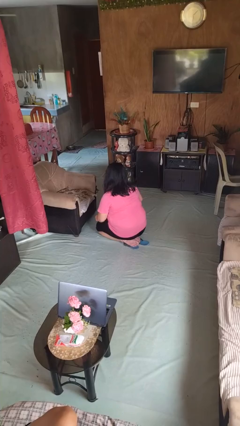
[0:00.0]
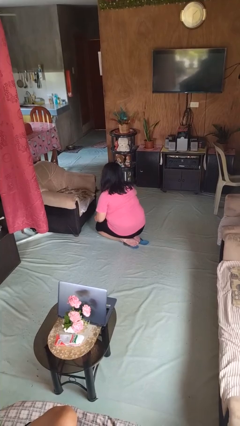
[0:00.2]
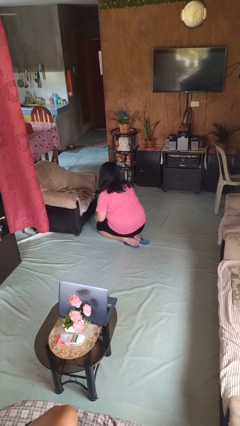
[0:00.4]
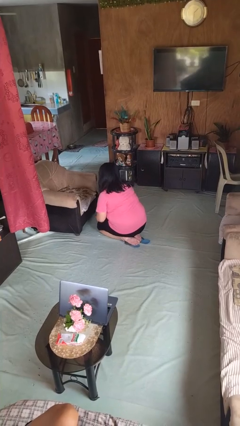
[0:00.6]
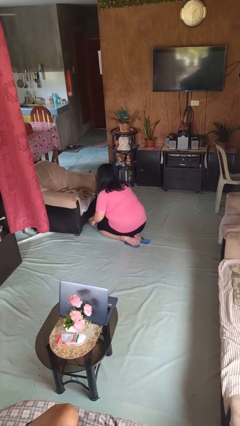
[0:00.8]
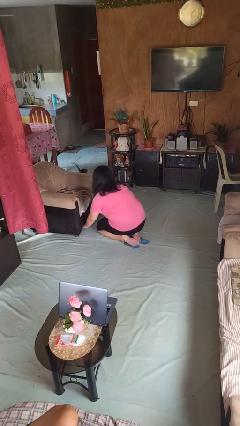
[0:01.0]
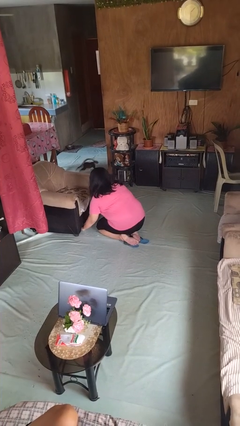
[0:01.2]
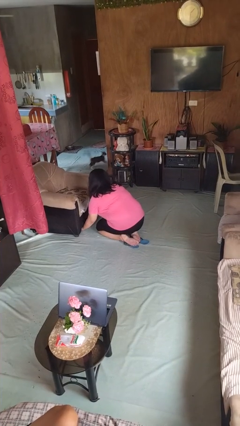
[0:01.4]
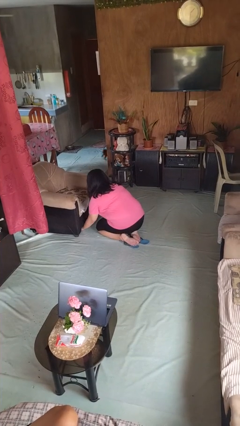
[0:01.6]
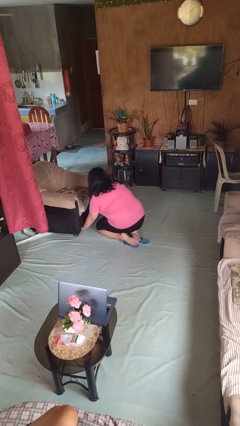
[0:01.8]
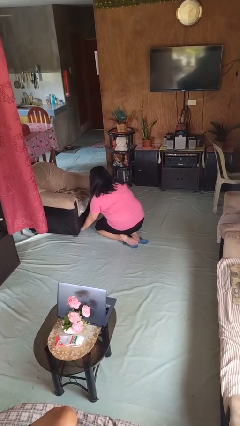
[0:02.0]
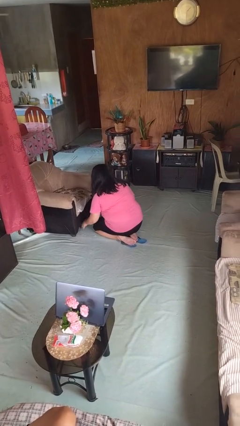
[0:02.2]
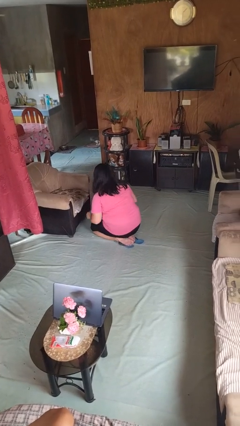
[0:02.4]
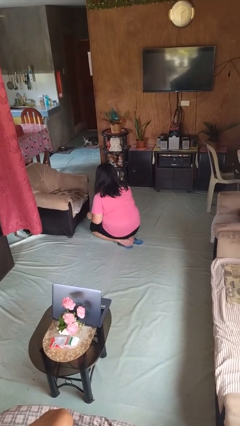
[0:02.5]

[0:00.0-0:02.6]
person searches under couch

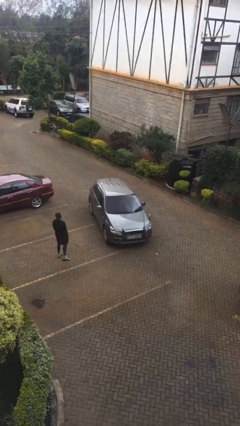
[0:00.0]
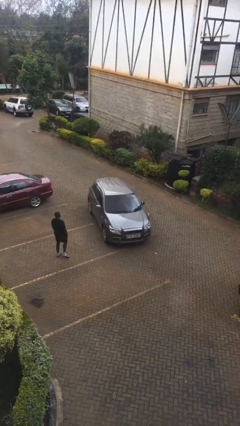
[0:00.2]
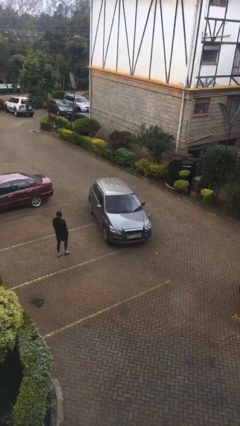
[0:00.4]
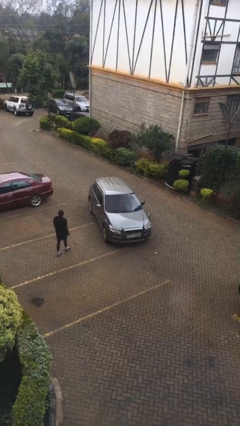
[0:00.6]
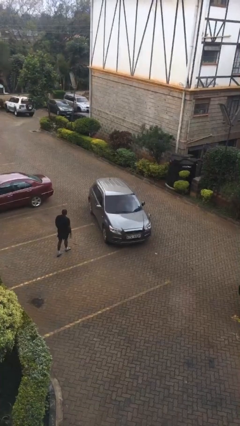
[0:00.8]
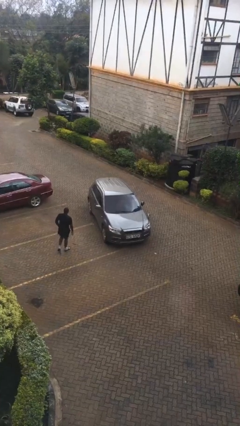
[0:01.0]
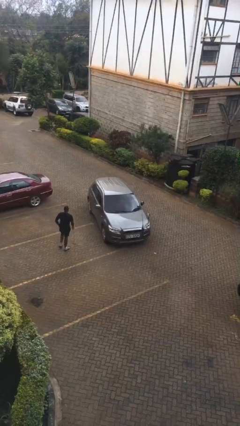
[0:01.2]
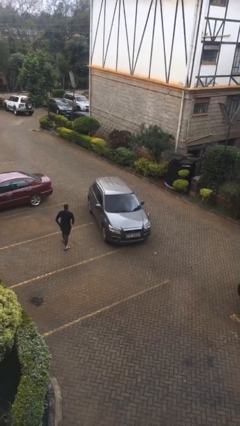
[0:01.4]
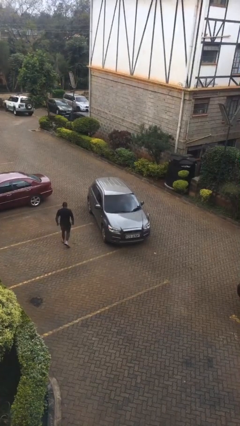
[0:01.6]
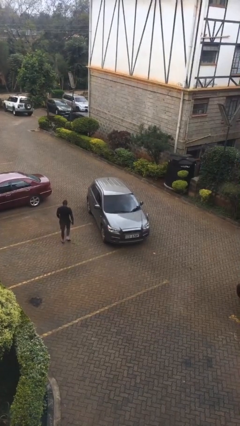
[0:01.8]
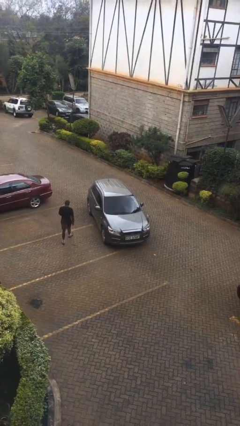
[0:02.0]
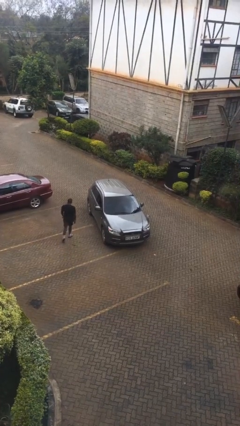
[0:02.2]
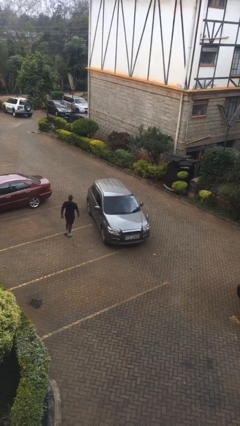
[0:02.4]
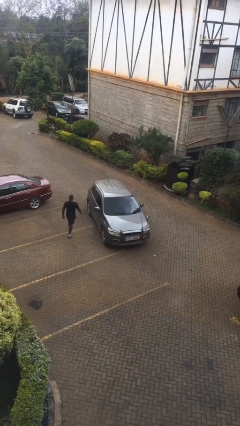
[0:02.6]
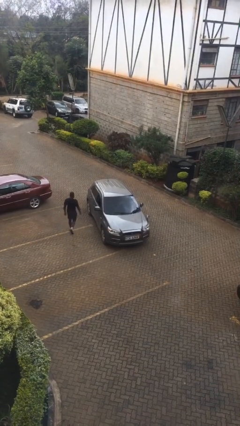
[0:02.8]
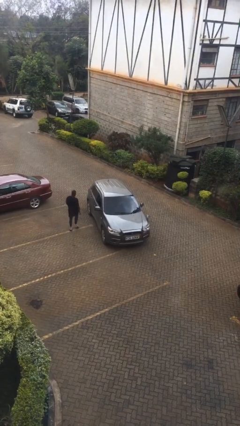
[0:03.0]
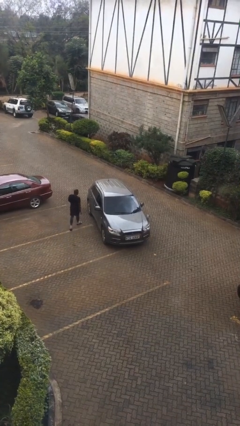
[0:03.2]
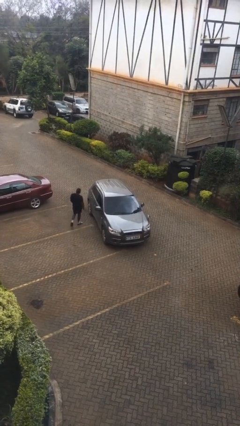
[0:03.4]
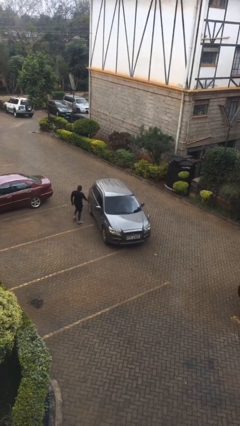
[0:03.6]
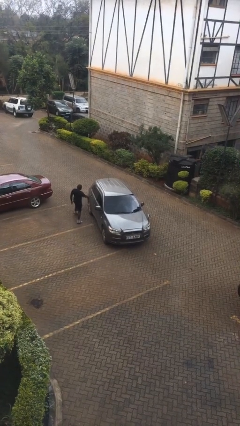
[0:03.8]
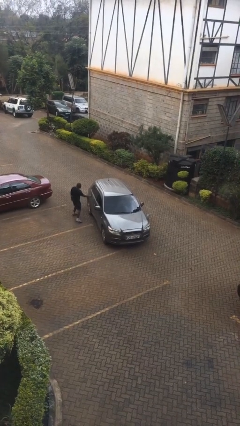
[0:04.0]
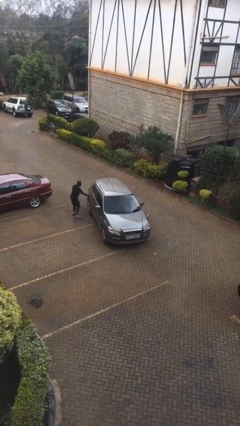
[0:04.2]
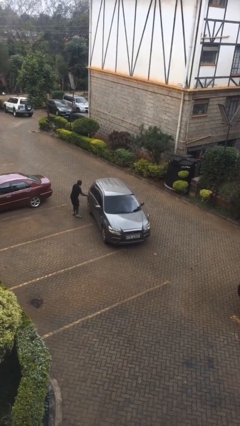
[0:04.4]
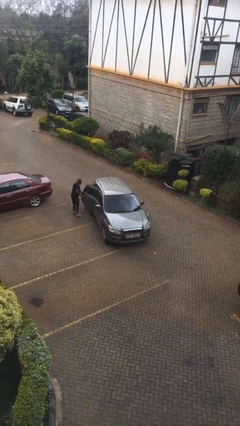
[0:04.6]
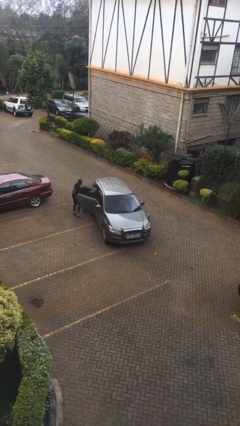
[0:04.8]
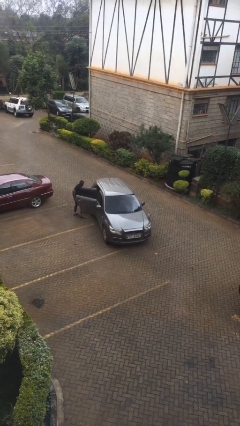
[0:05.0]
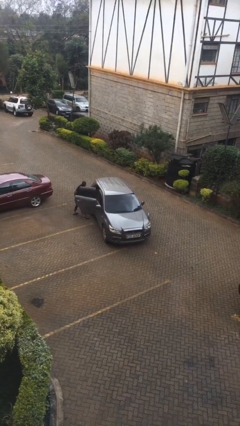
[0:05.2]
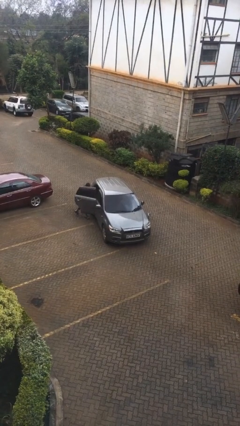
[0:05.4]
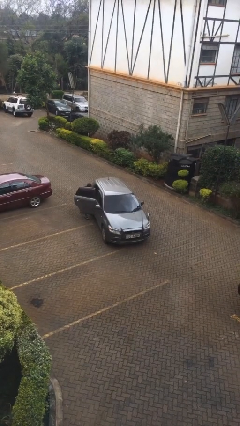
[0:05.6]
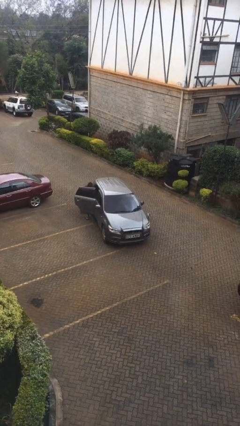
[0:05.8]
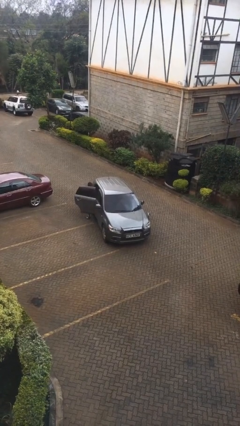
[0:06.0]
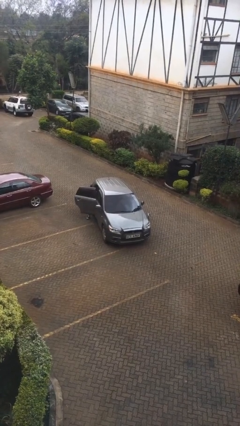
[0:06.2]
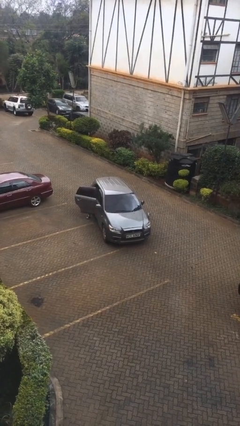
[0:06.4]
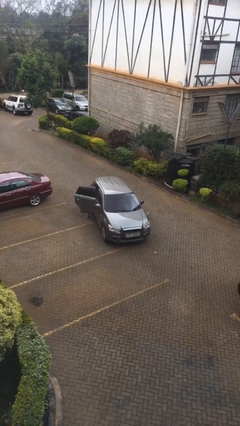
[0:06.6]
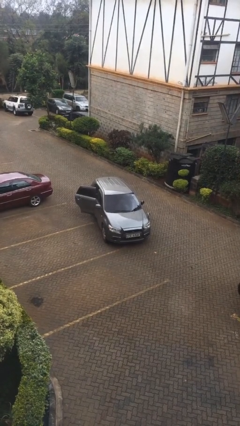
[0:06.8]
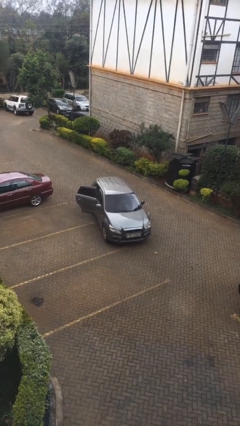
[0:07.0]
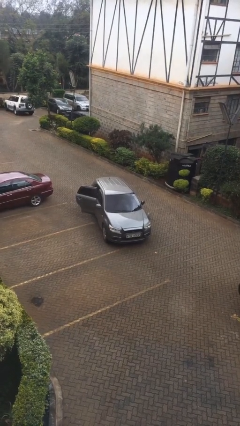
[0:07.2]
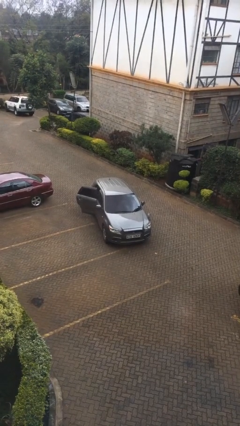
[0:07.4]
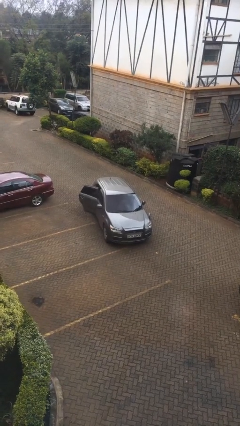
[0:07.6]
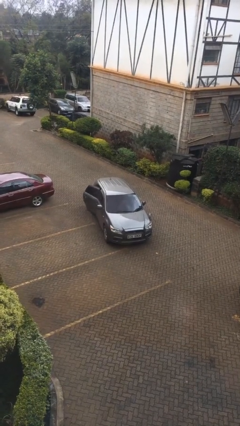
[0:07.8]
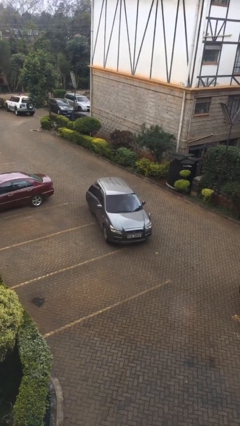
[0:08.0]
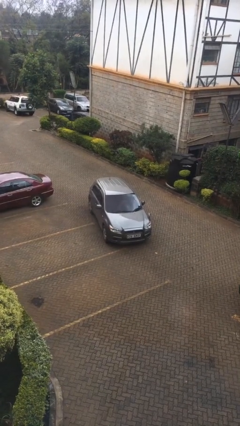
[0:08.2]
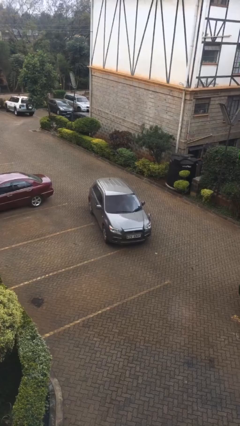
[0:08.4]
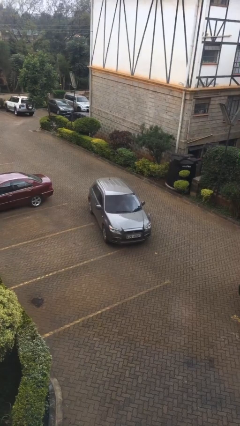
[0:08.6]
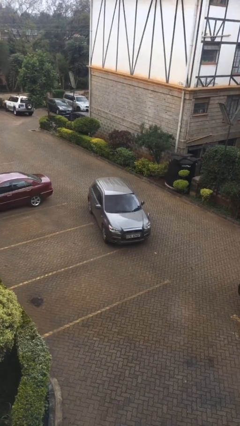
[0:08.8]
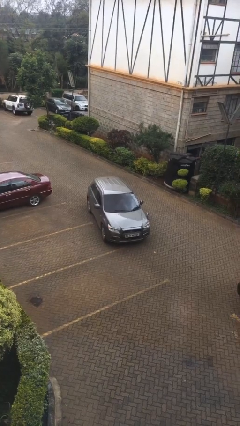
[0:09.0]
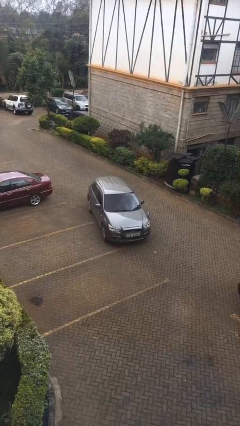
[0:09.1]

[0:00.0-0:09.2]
car picks up person

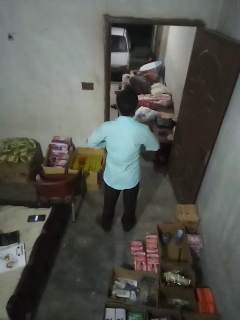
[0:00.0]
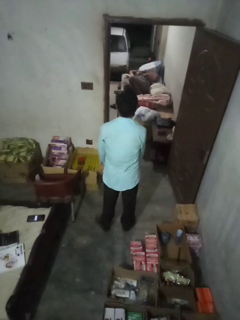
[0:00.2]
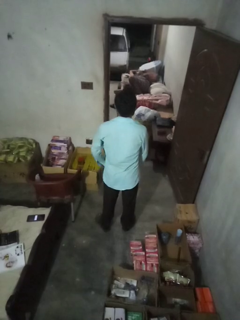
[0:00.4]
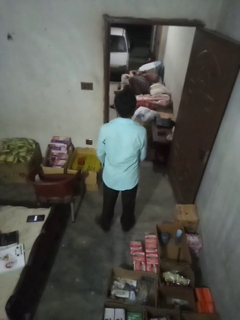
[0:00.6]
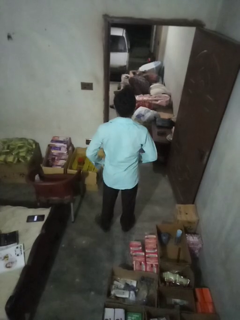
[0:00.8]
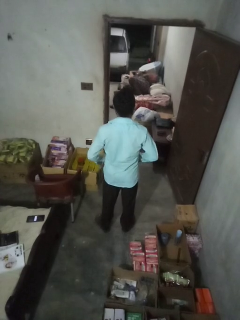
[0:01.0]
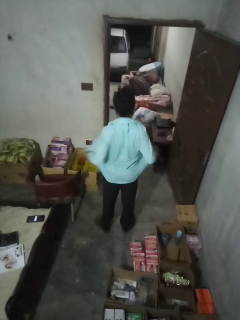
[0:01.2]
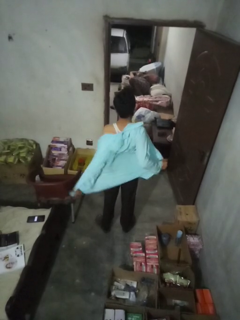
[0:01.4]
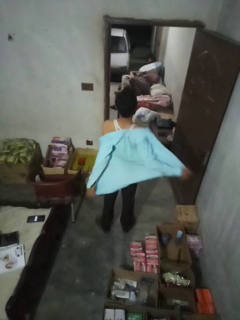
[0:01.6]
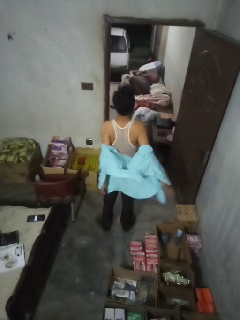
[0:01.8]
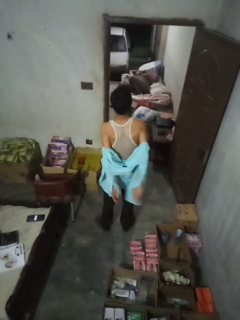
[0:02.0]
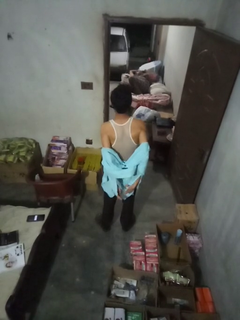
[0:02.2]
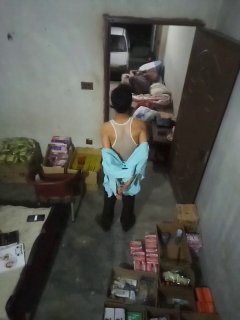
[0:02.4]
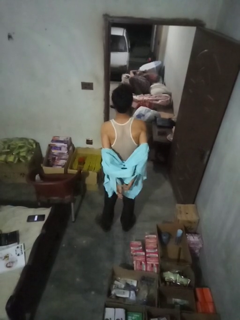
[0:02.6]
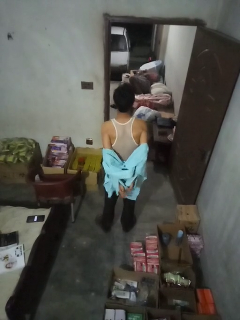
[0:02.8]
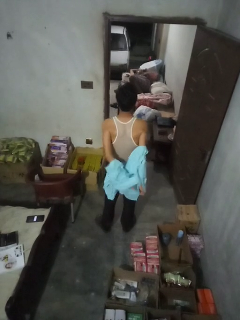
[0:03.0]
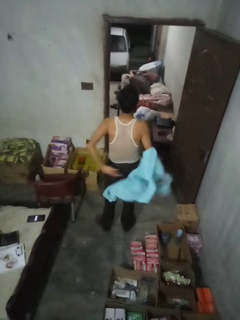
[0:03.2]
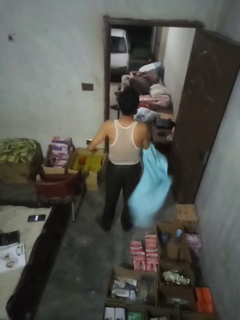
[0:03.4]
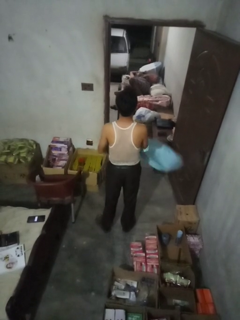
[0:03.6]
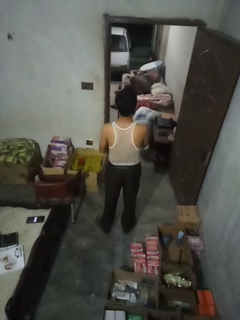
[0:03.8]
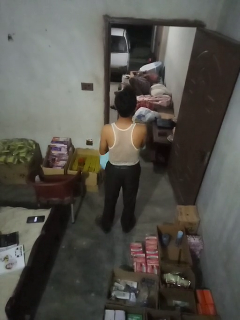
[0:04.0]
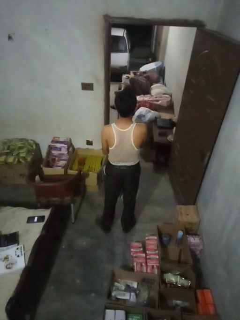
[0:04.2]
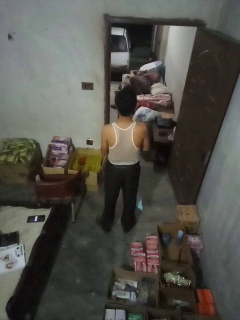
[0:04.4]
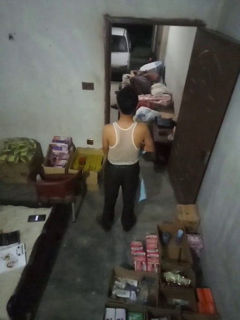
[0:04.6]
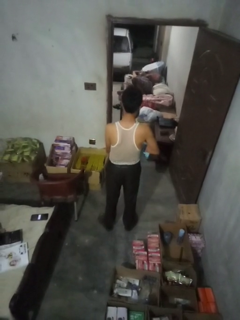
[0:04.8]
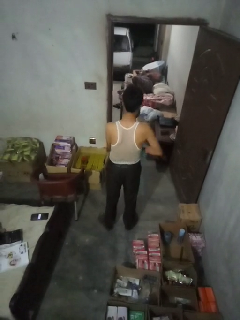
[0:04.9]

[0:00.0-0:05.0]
person takes off shirt

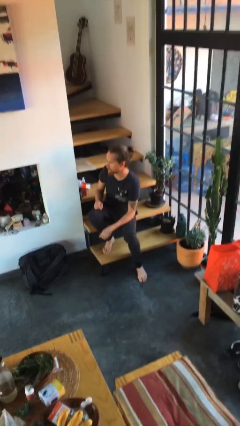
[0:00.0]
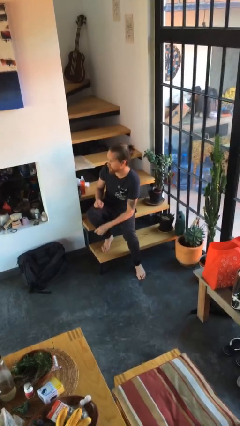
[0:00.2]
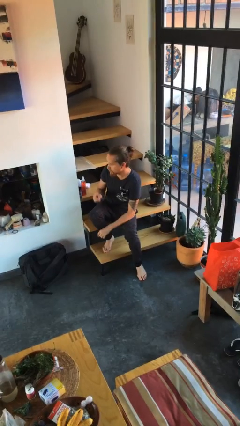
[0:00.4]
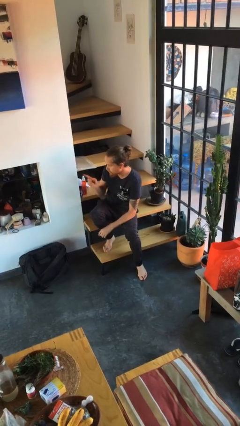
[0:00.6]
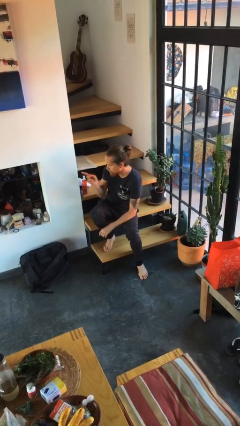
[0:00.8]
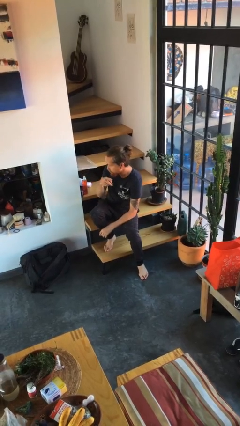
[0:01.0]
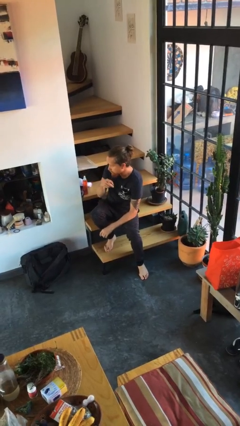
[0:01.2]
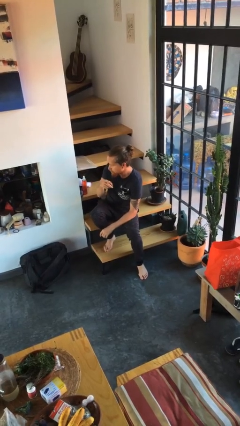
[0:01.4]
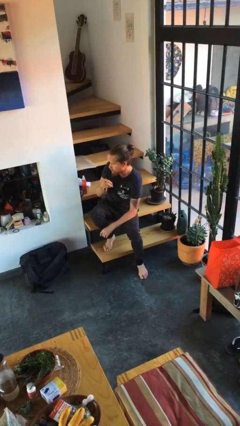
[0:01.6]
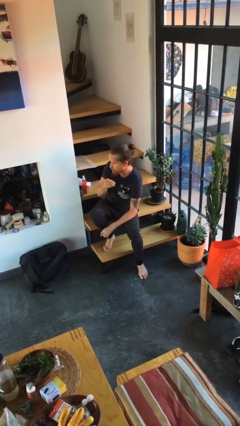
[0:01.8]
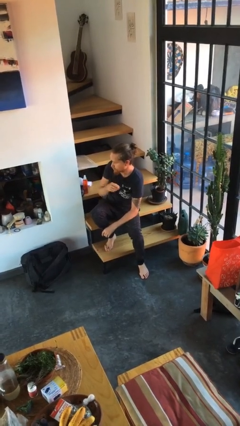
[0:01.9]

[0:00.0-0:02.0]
person gestures swipe left
